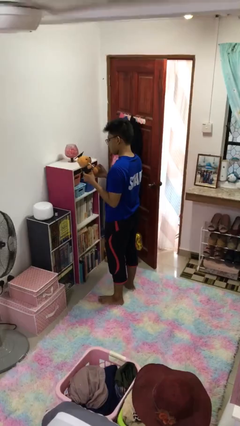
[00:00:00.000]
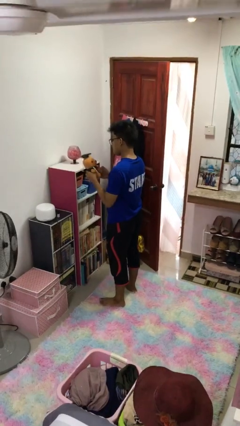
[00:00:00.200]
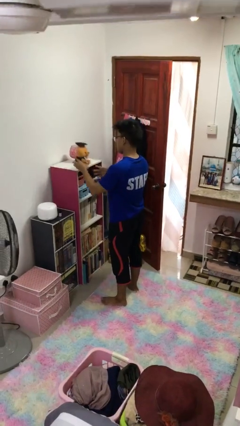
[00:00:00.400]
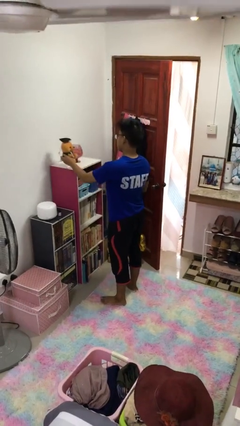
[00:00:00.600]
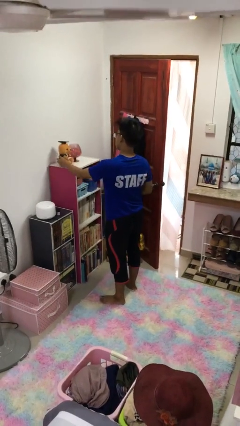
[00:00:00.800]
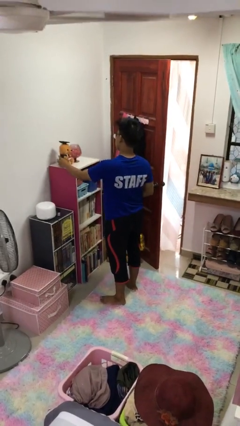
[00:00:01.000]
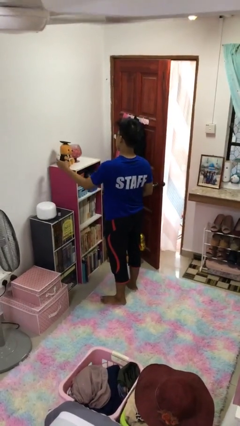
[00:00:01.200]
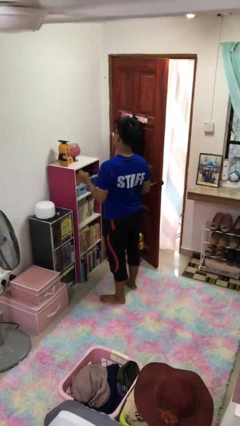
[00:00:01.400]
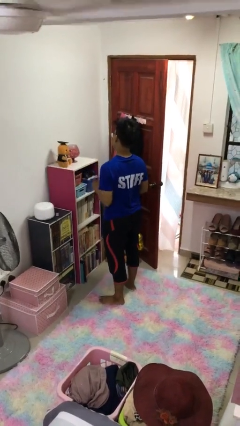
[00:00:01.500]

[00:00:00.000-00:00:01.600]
person puts down object on shelf

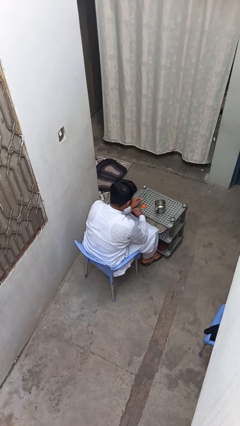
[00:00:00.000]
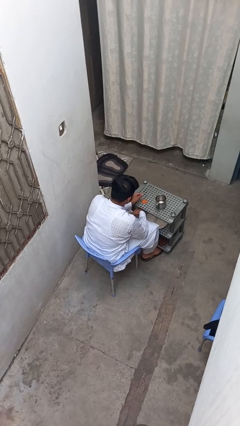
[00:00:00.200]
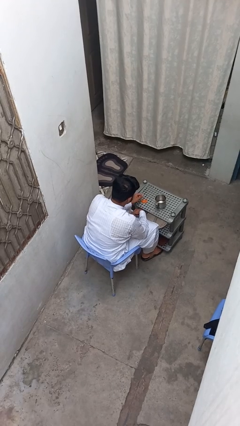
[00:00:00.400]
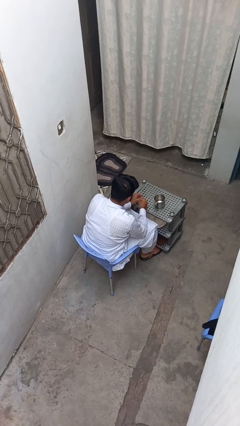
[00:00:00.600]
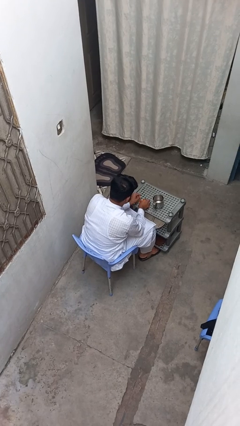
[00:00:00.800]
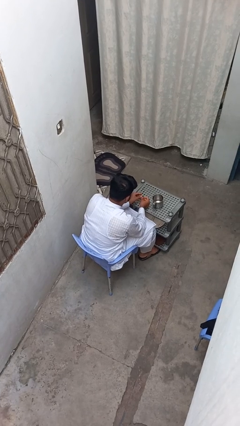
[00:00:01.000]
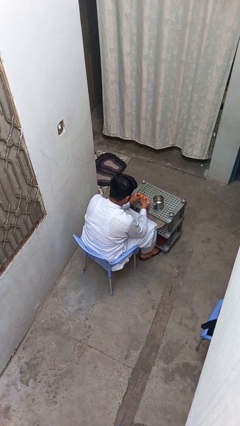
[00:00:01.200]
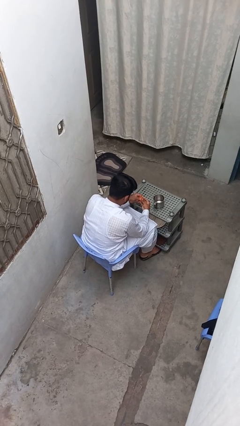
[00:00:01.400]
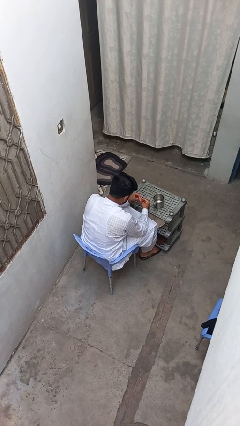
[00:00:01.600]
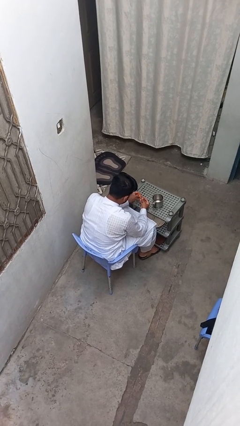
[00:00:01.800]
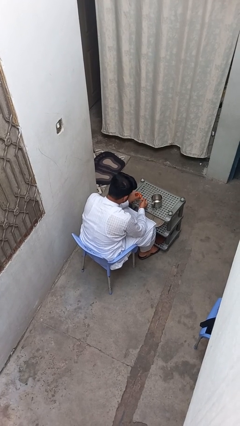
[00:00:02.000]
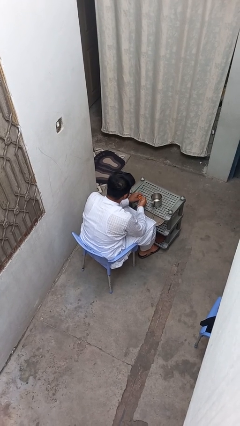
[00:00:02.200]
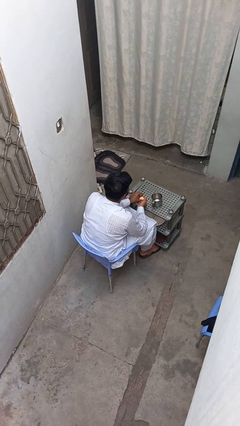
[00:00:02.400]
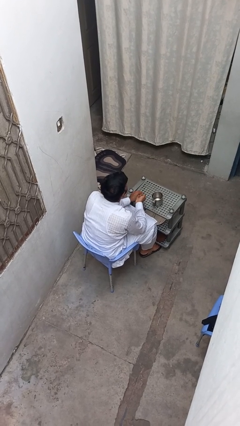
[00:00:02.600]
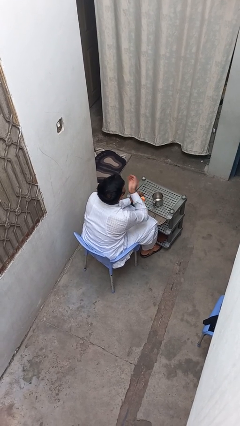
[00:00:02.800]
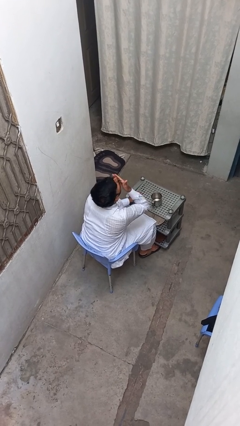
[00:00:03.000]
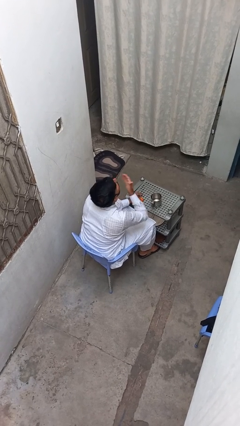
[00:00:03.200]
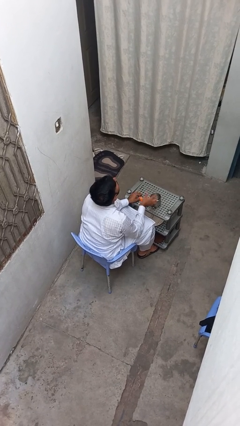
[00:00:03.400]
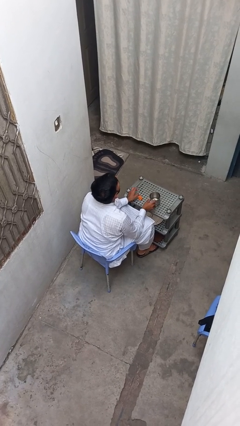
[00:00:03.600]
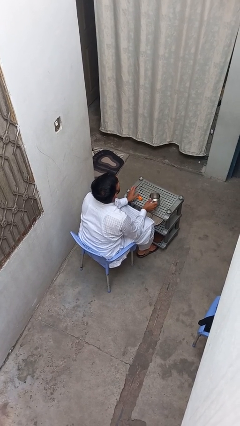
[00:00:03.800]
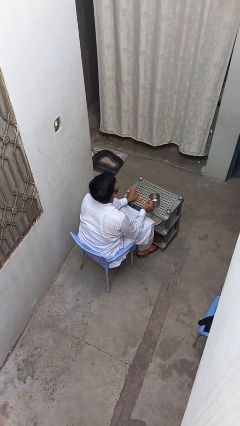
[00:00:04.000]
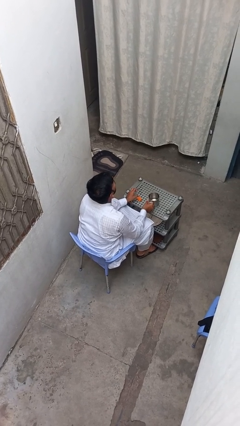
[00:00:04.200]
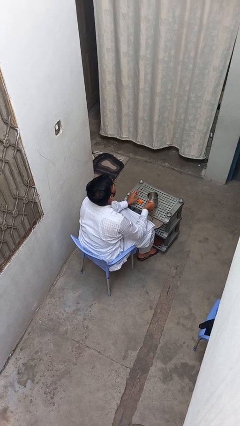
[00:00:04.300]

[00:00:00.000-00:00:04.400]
person takes medicine pills

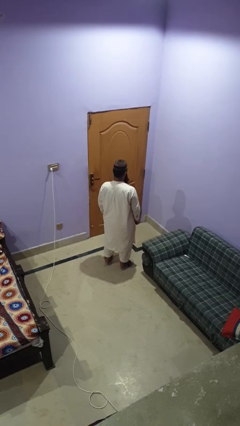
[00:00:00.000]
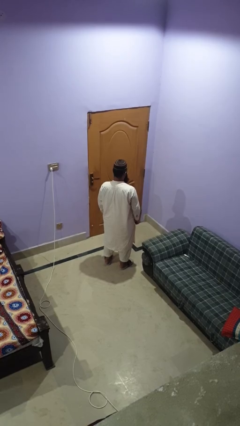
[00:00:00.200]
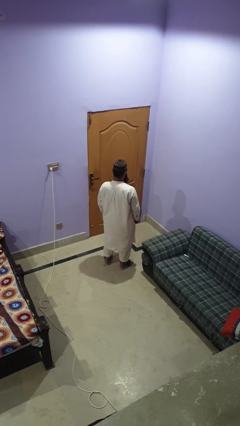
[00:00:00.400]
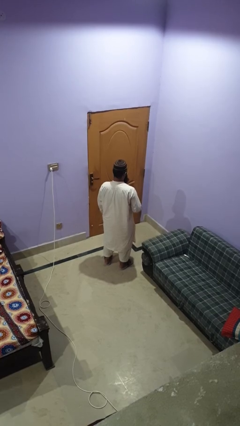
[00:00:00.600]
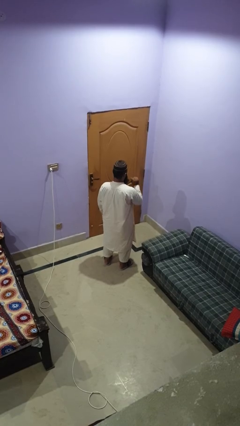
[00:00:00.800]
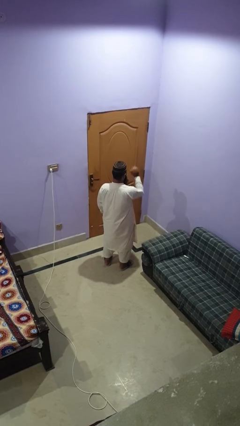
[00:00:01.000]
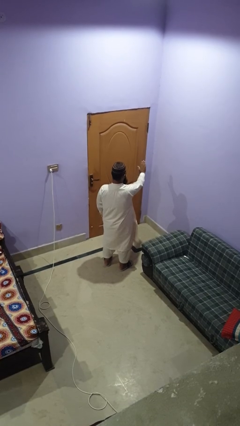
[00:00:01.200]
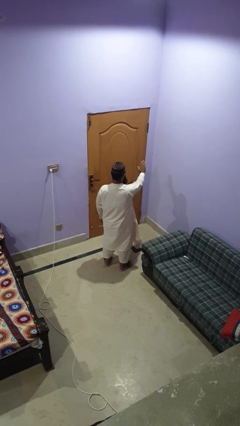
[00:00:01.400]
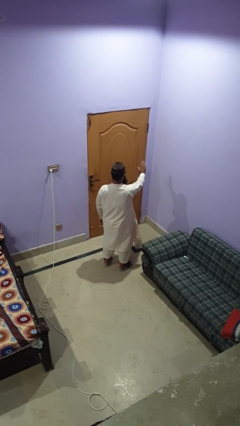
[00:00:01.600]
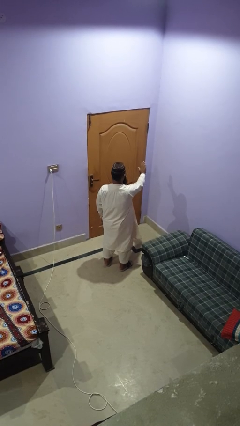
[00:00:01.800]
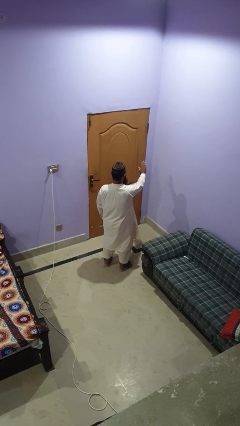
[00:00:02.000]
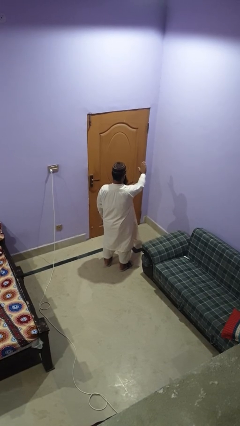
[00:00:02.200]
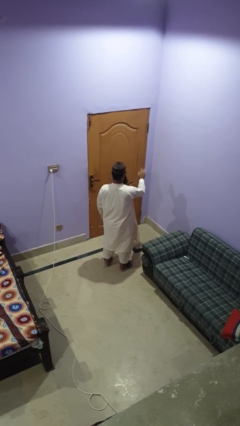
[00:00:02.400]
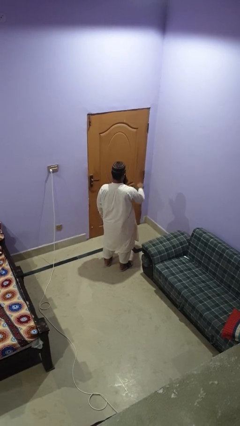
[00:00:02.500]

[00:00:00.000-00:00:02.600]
person gestures stop

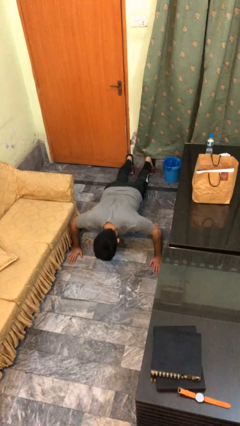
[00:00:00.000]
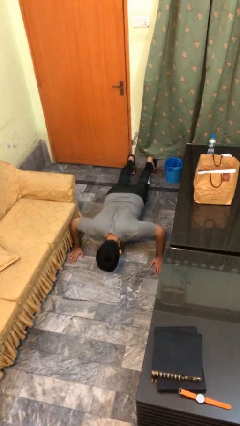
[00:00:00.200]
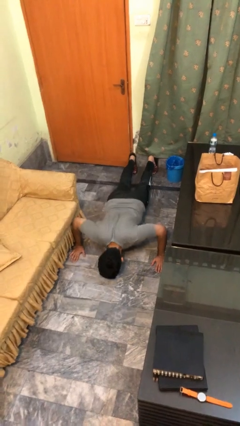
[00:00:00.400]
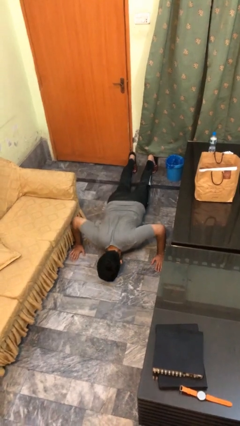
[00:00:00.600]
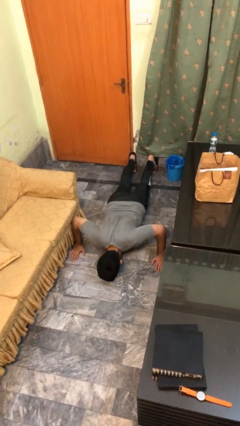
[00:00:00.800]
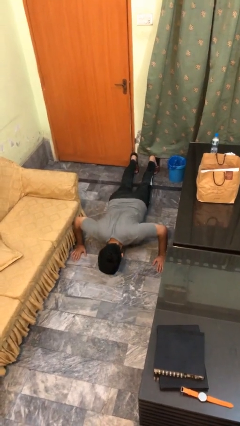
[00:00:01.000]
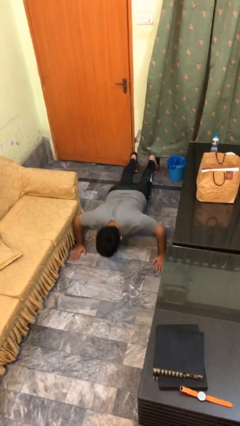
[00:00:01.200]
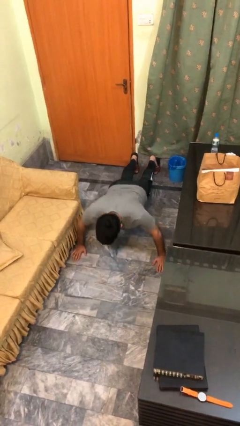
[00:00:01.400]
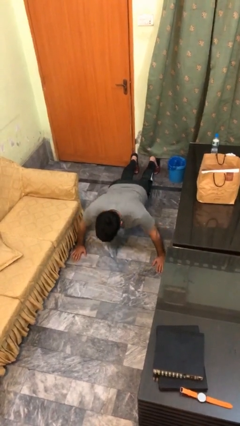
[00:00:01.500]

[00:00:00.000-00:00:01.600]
person exercises with pushup

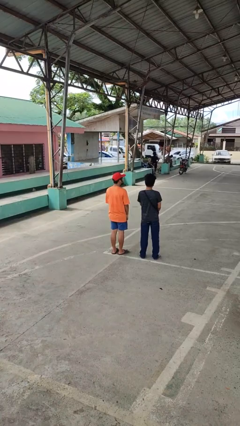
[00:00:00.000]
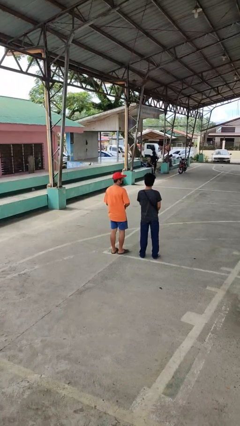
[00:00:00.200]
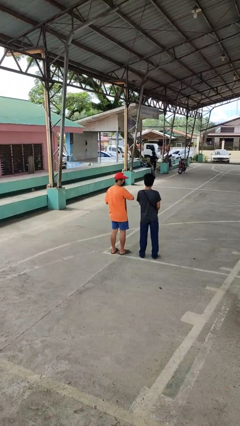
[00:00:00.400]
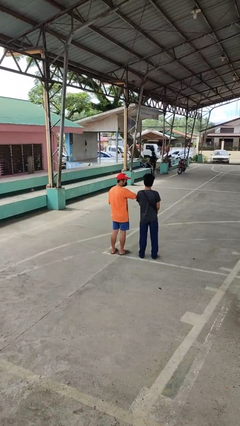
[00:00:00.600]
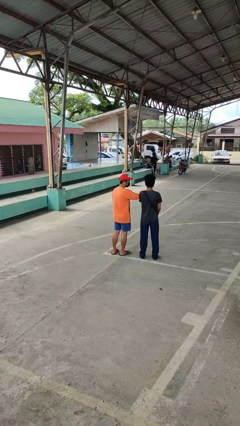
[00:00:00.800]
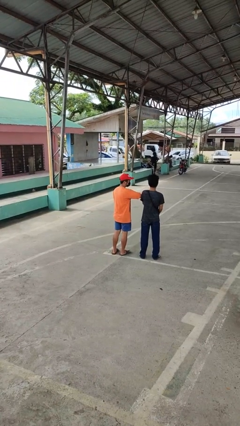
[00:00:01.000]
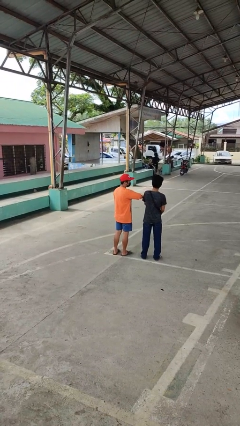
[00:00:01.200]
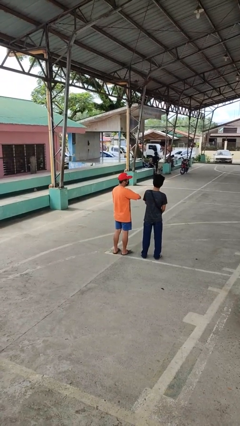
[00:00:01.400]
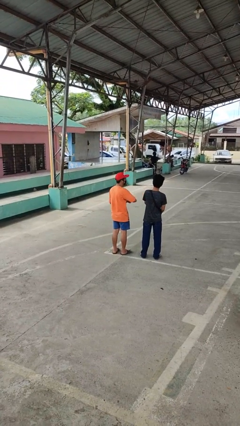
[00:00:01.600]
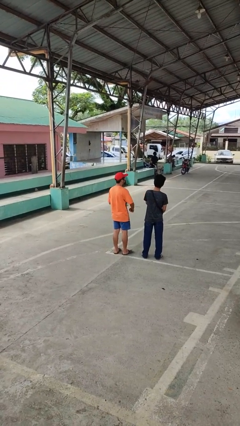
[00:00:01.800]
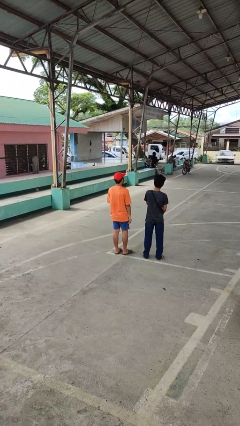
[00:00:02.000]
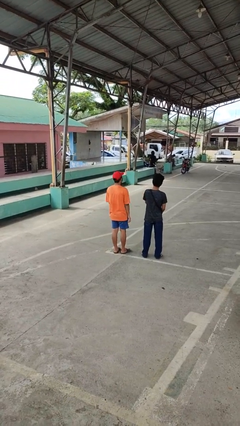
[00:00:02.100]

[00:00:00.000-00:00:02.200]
person nudges person with elbow

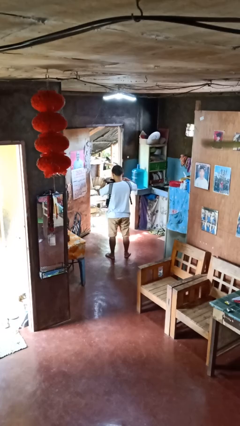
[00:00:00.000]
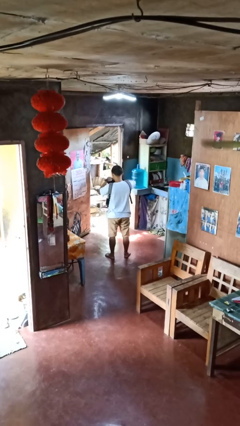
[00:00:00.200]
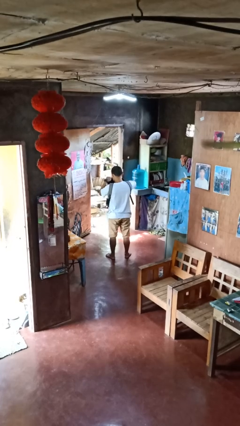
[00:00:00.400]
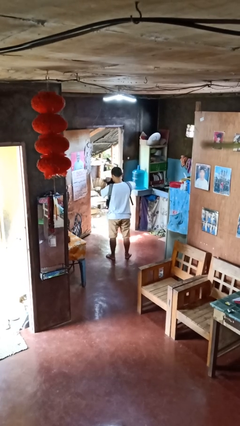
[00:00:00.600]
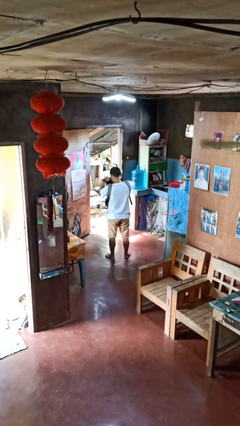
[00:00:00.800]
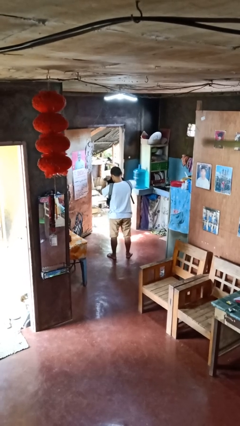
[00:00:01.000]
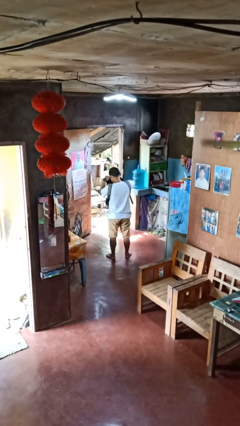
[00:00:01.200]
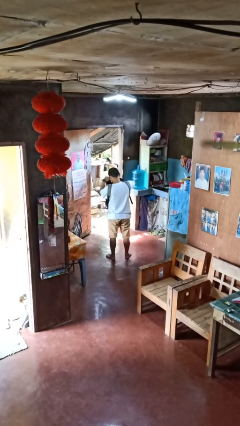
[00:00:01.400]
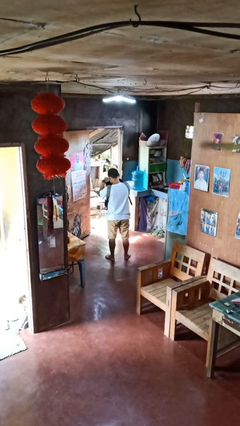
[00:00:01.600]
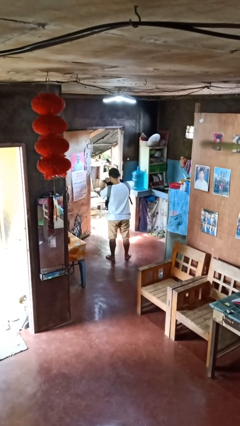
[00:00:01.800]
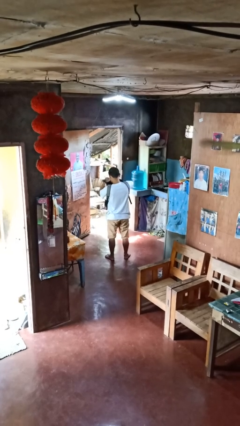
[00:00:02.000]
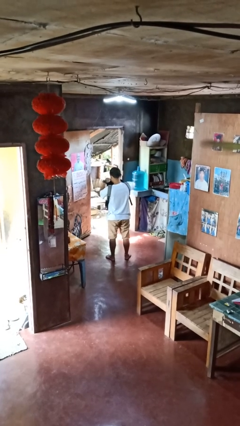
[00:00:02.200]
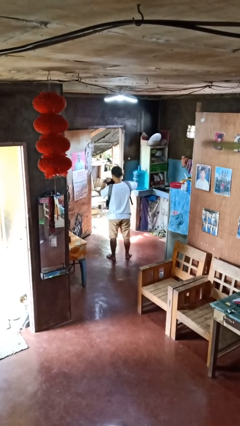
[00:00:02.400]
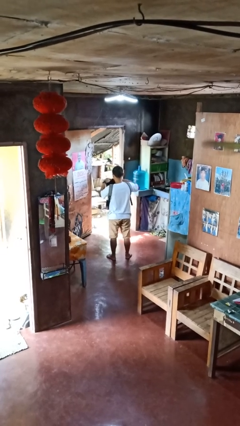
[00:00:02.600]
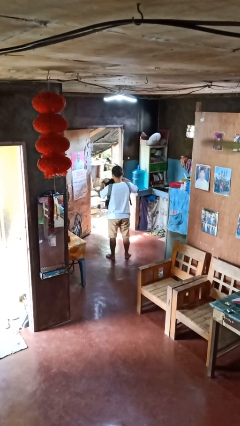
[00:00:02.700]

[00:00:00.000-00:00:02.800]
person searches in backpack

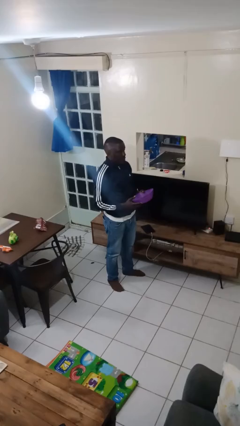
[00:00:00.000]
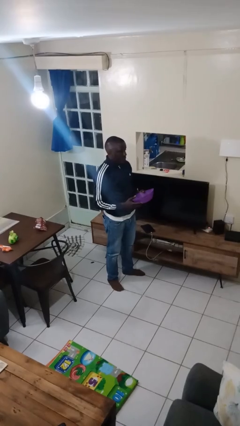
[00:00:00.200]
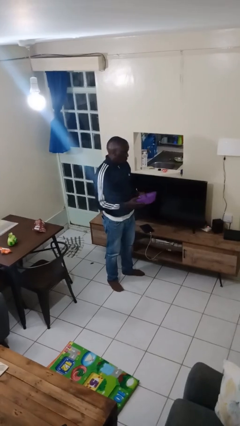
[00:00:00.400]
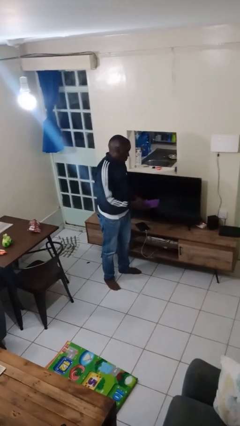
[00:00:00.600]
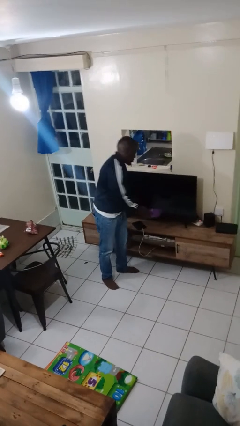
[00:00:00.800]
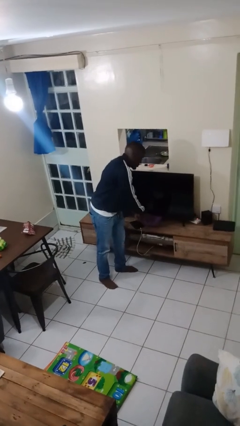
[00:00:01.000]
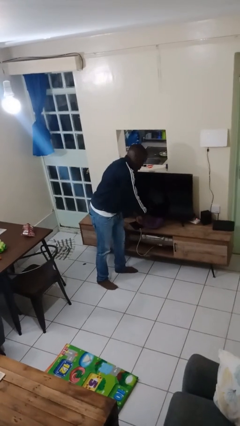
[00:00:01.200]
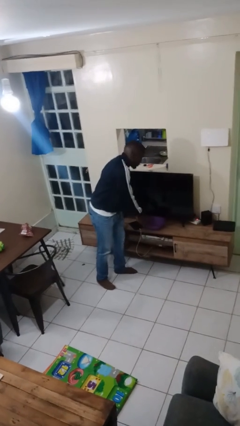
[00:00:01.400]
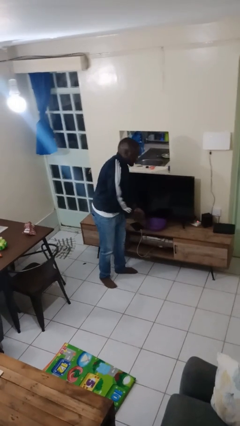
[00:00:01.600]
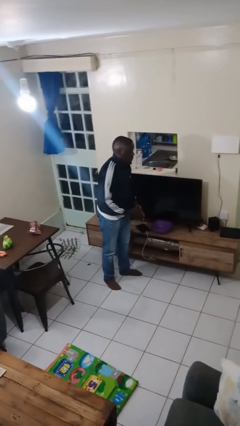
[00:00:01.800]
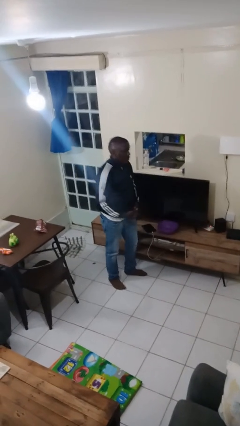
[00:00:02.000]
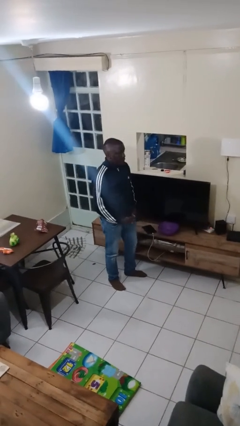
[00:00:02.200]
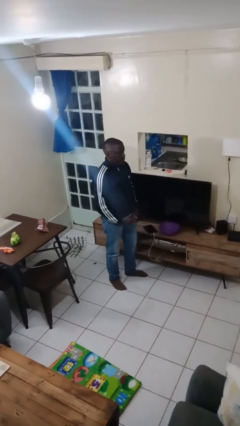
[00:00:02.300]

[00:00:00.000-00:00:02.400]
person puts down object on countertop
